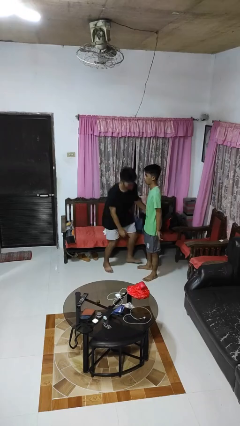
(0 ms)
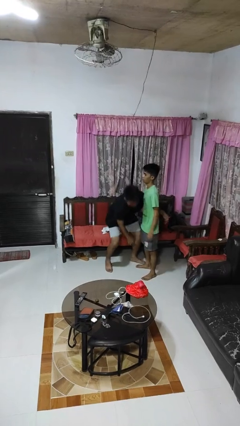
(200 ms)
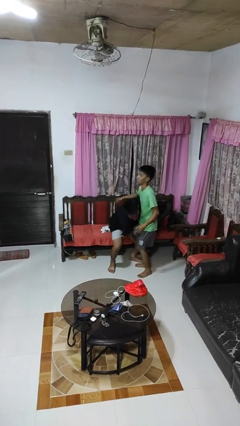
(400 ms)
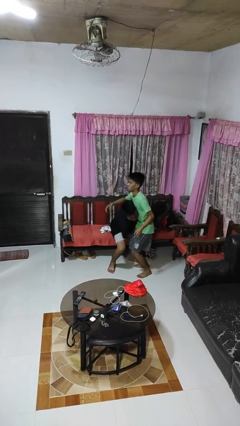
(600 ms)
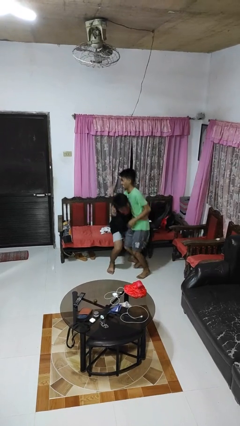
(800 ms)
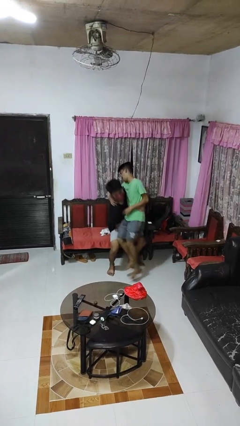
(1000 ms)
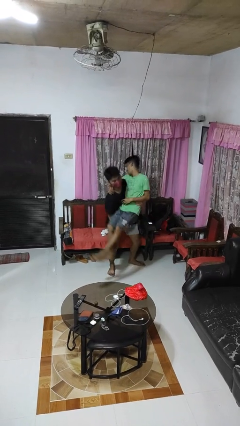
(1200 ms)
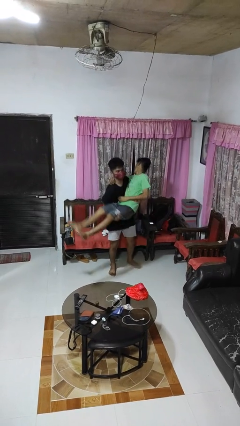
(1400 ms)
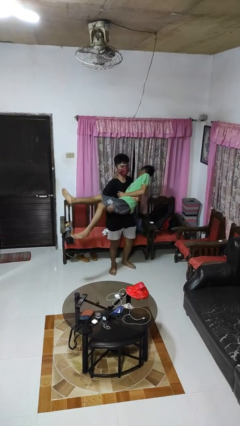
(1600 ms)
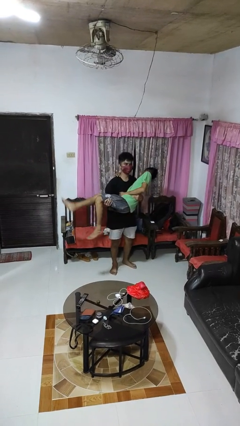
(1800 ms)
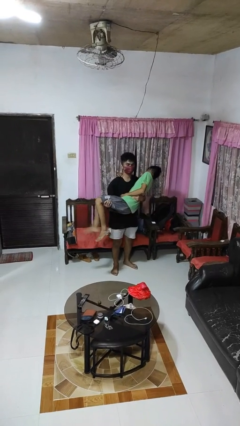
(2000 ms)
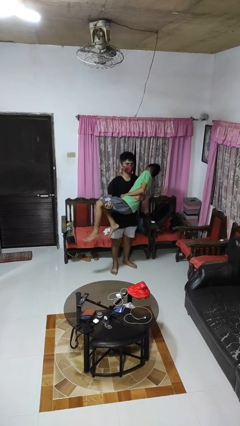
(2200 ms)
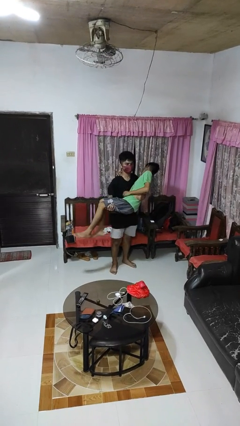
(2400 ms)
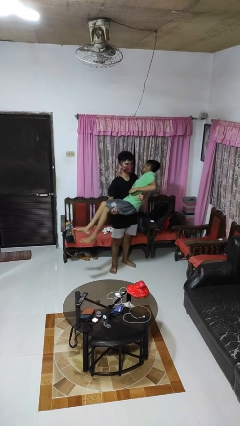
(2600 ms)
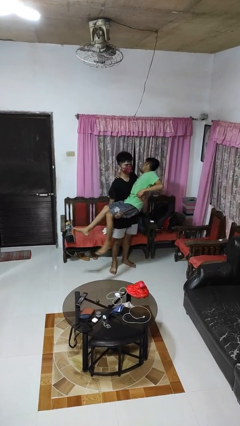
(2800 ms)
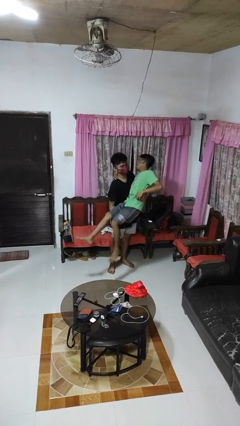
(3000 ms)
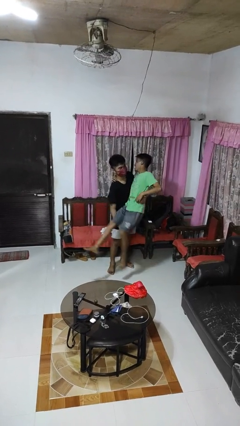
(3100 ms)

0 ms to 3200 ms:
person picks up person

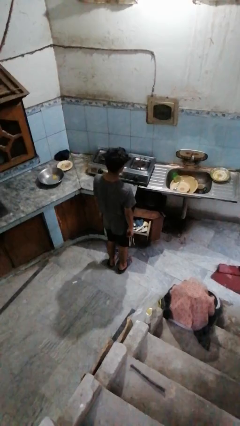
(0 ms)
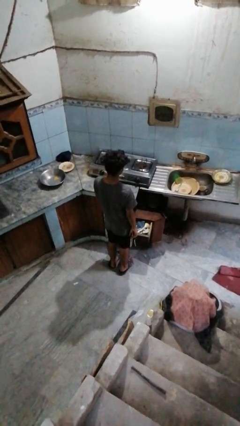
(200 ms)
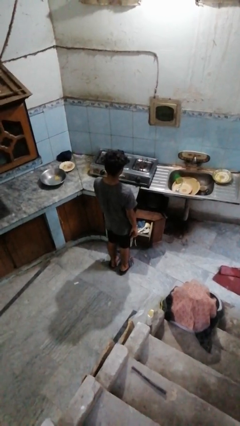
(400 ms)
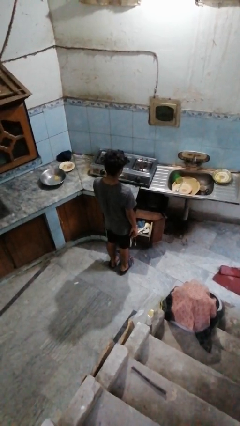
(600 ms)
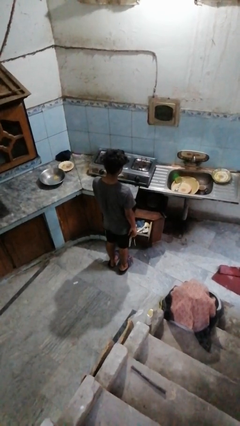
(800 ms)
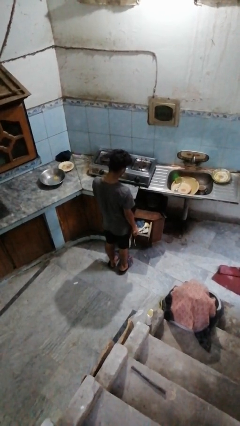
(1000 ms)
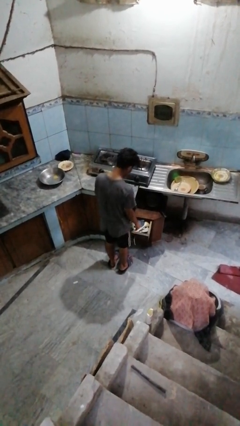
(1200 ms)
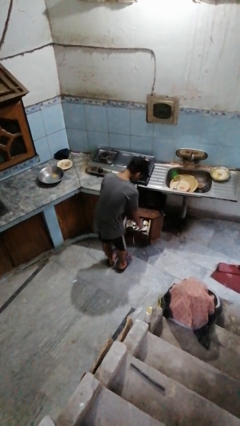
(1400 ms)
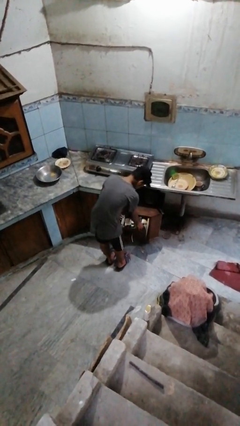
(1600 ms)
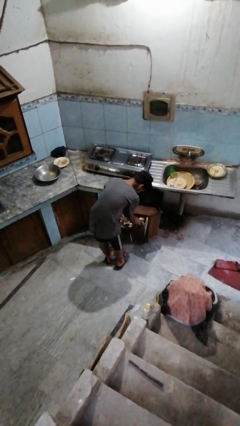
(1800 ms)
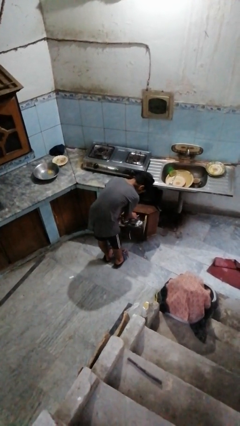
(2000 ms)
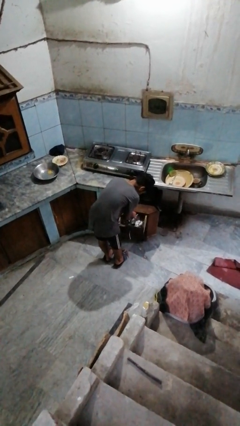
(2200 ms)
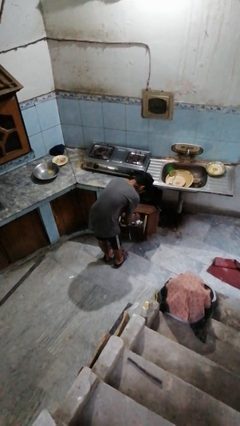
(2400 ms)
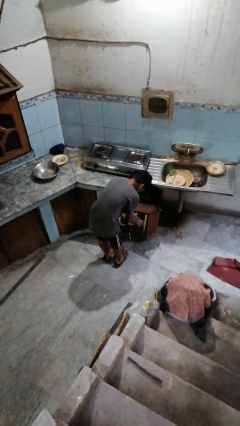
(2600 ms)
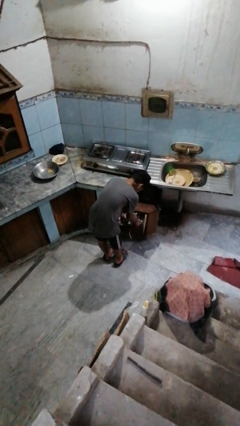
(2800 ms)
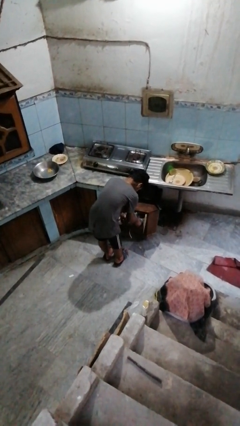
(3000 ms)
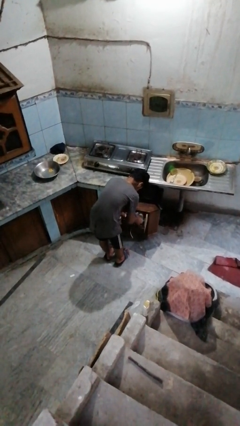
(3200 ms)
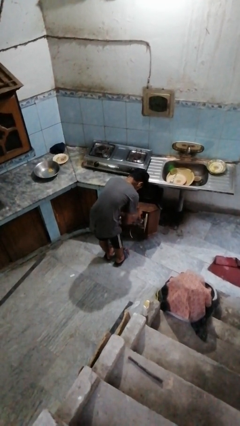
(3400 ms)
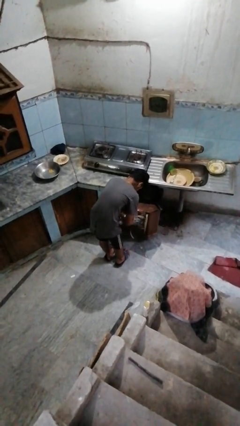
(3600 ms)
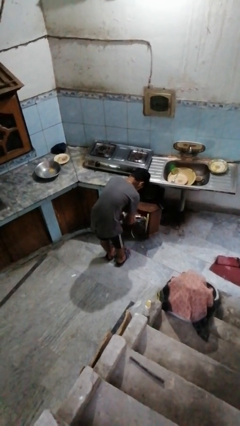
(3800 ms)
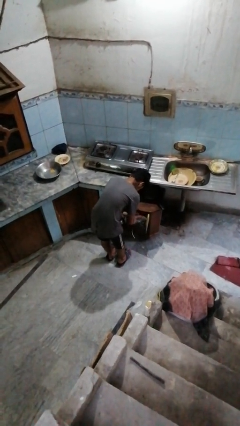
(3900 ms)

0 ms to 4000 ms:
person searches in kitchen drawer

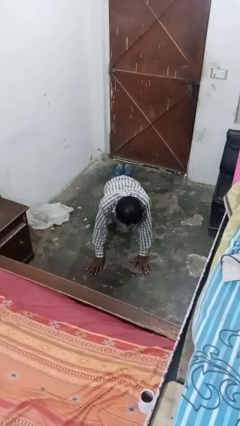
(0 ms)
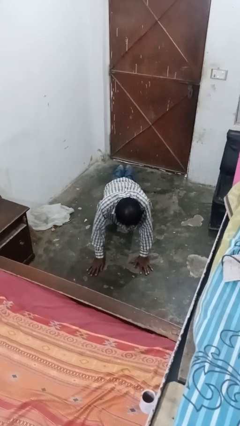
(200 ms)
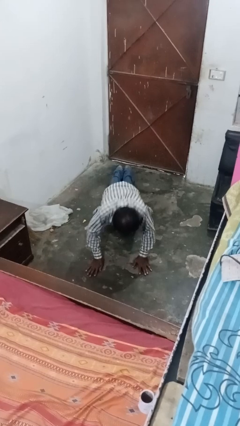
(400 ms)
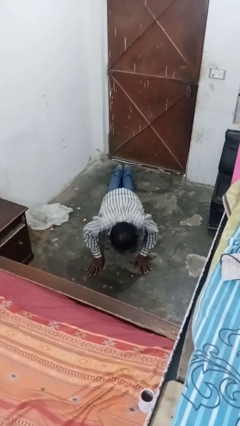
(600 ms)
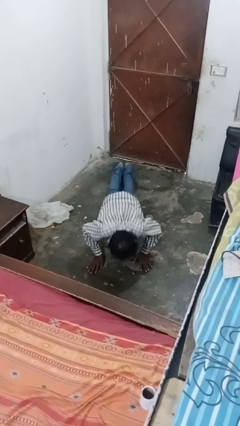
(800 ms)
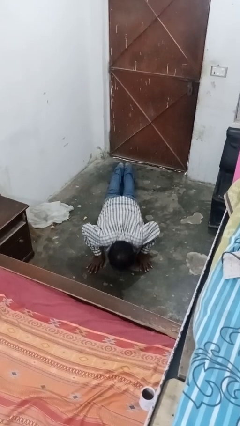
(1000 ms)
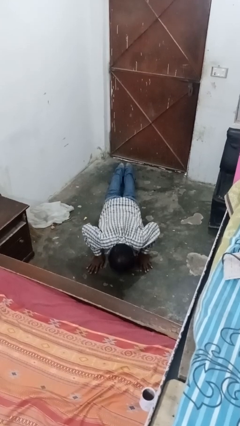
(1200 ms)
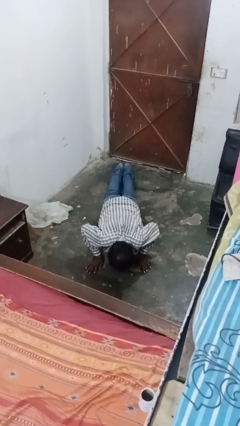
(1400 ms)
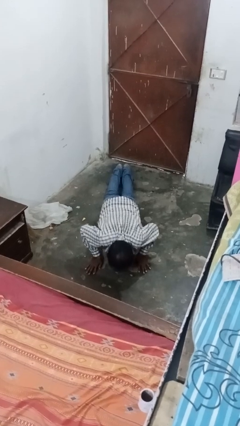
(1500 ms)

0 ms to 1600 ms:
person exercises with pushup

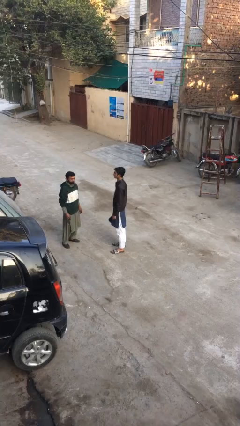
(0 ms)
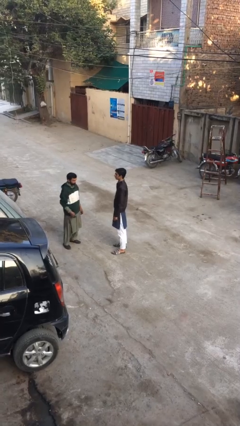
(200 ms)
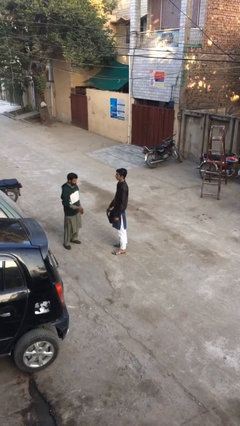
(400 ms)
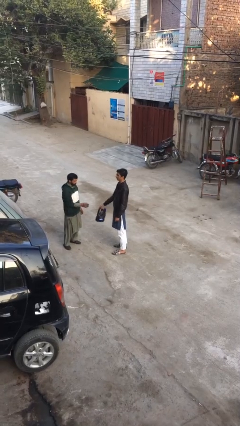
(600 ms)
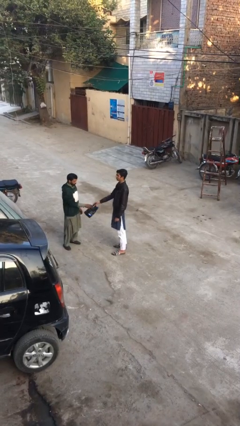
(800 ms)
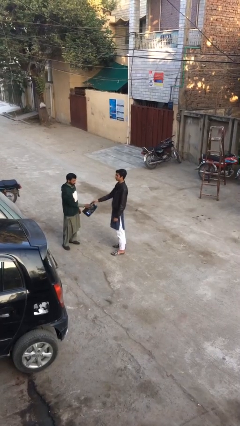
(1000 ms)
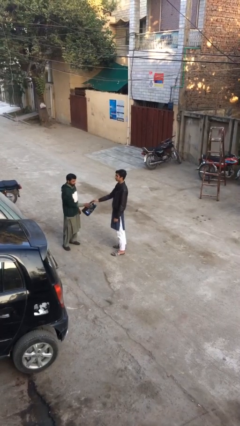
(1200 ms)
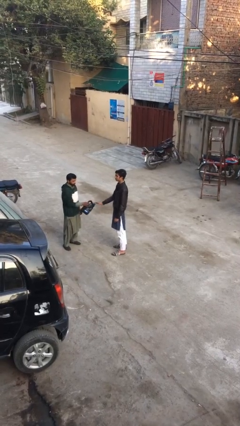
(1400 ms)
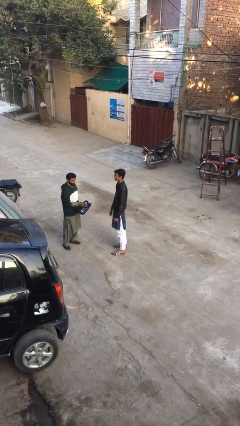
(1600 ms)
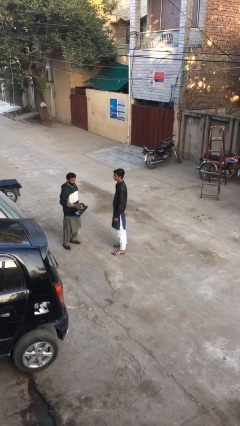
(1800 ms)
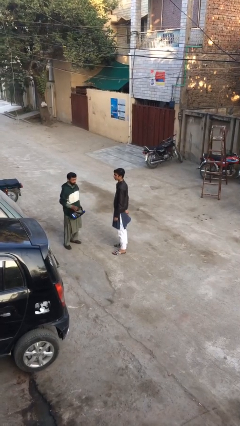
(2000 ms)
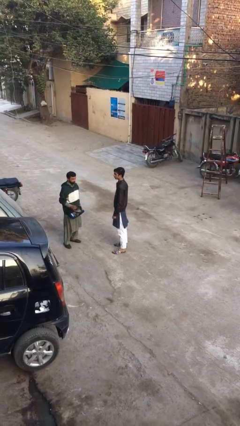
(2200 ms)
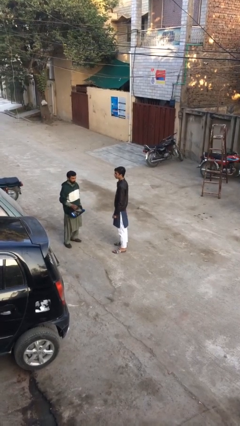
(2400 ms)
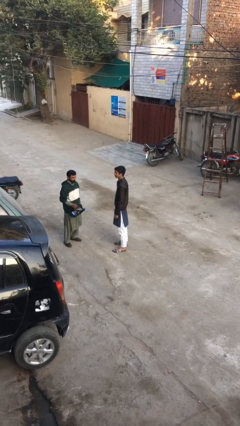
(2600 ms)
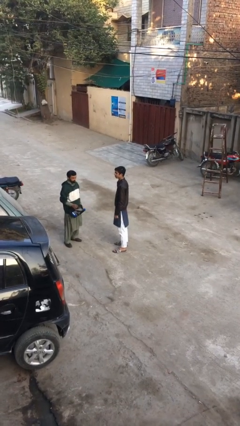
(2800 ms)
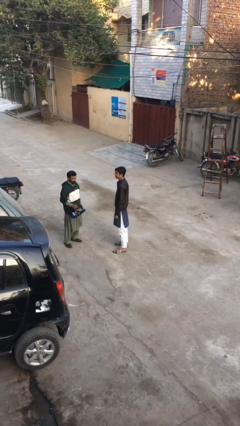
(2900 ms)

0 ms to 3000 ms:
person transfers object to person

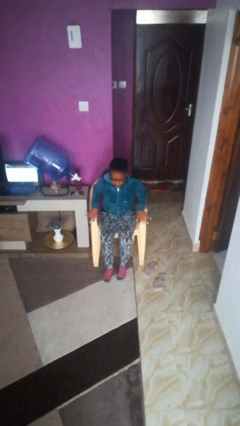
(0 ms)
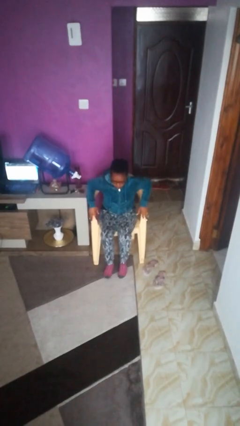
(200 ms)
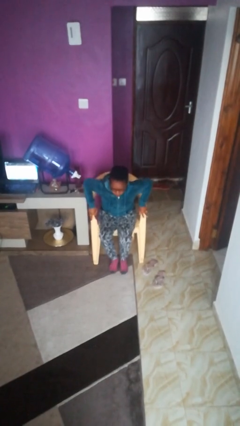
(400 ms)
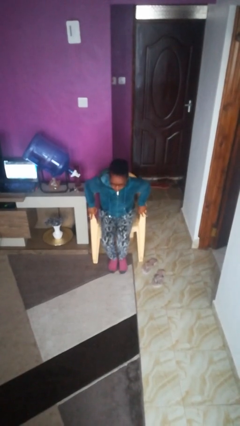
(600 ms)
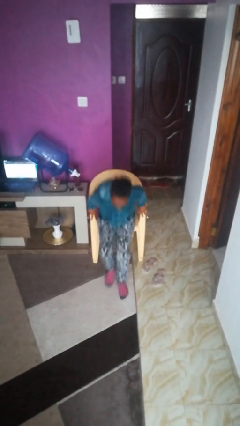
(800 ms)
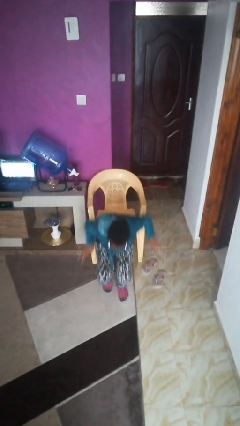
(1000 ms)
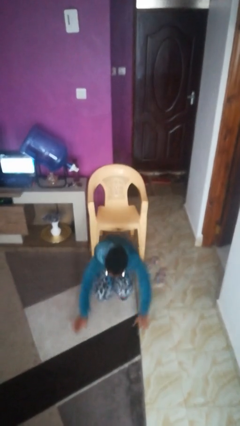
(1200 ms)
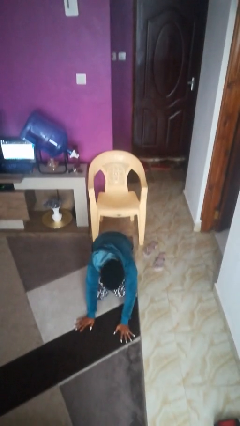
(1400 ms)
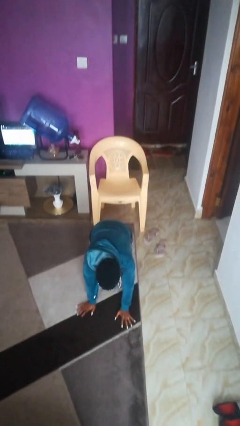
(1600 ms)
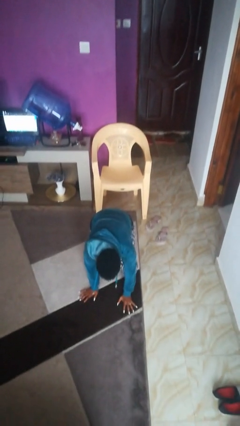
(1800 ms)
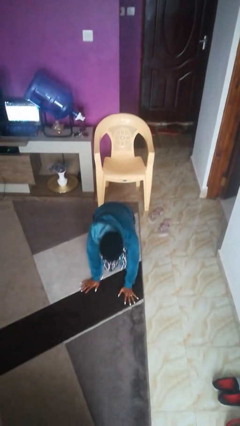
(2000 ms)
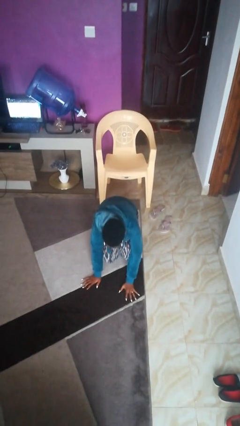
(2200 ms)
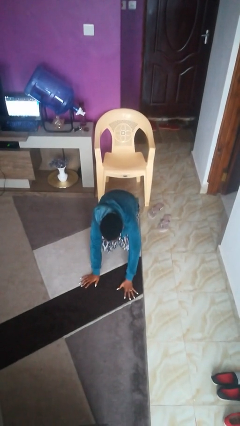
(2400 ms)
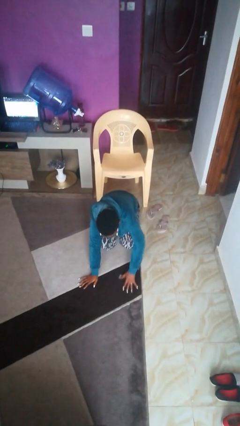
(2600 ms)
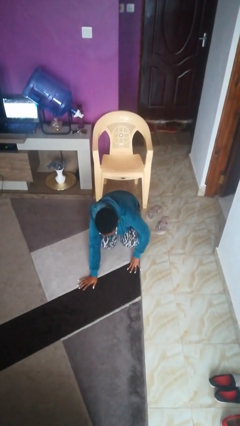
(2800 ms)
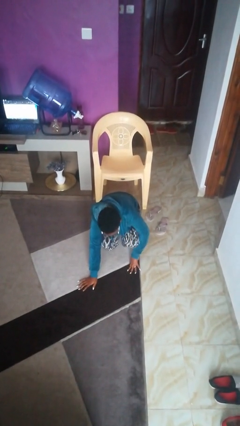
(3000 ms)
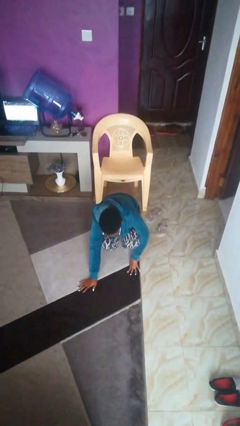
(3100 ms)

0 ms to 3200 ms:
person falls from chair

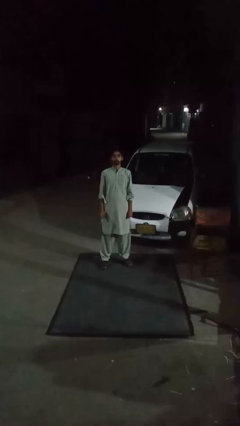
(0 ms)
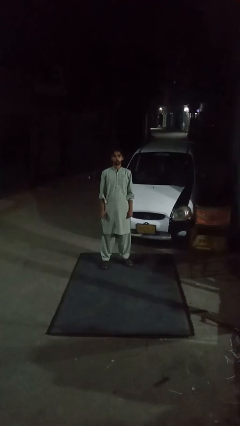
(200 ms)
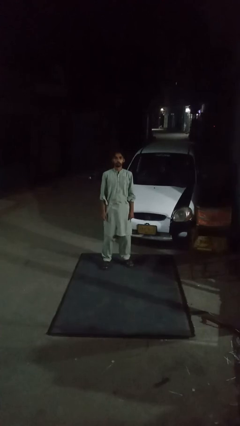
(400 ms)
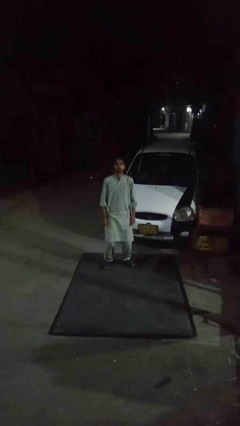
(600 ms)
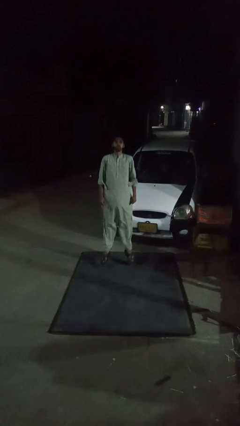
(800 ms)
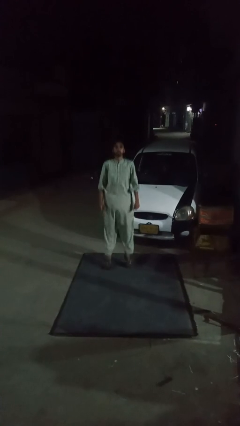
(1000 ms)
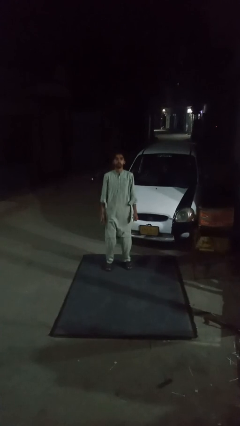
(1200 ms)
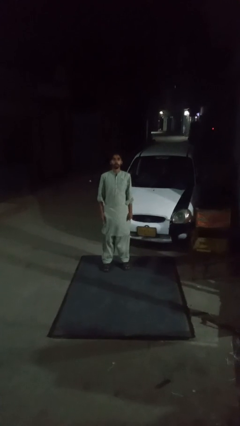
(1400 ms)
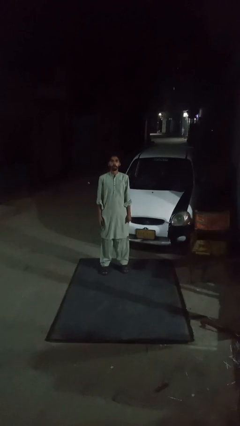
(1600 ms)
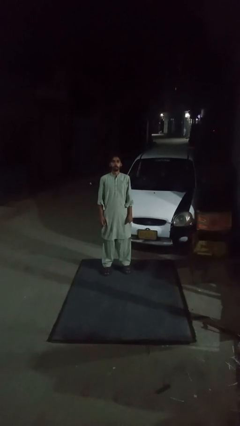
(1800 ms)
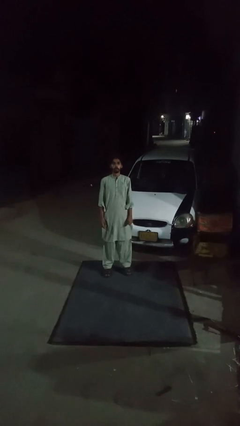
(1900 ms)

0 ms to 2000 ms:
person exercises with jumping jacks

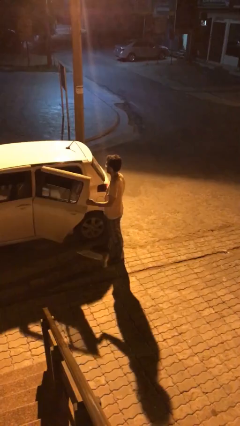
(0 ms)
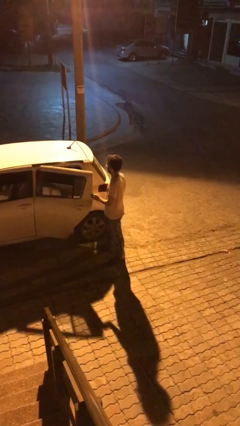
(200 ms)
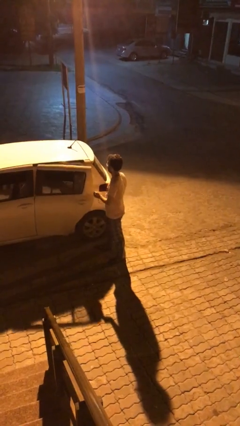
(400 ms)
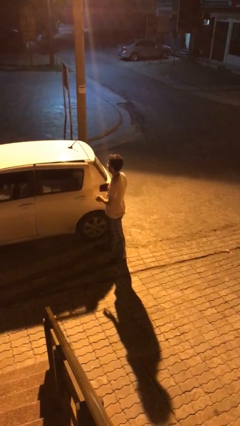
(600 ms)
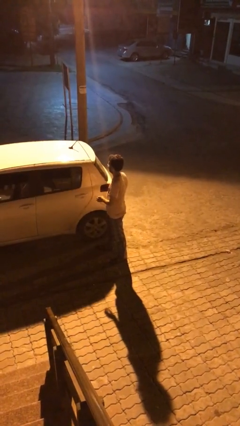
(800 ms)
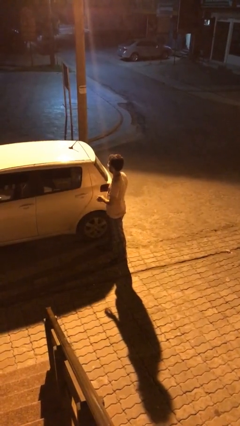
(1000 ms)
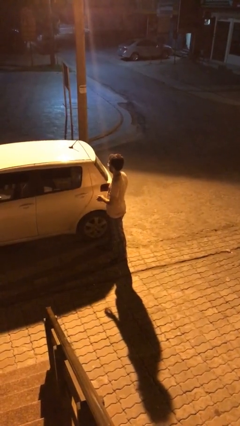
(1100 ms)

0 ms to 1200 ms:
person closes car door
